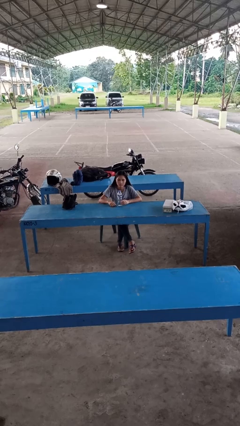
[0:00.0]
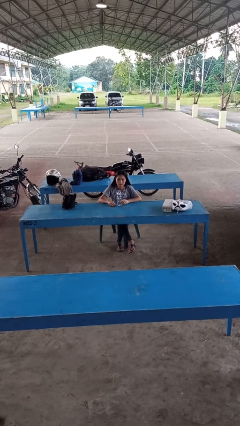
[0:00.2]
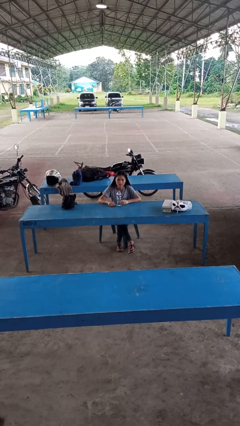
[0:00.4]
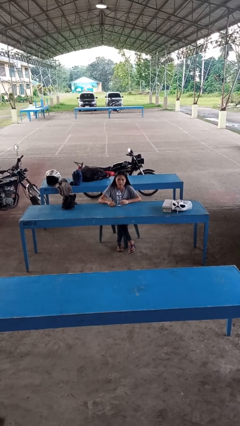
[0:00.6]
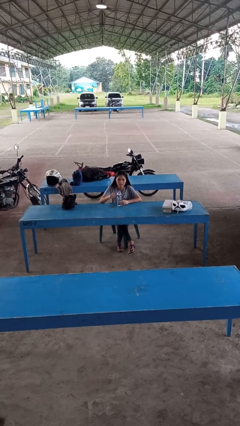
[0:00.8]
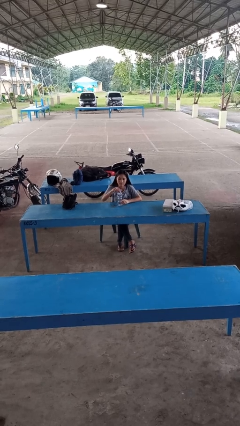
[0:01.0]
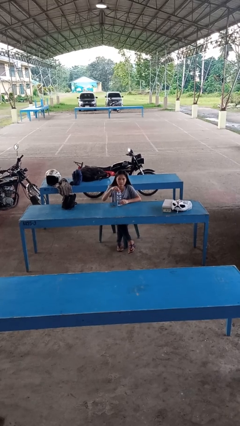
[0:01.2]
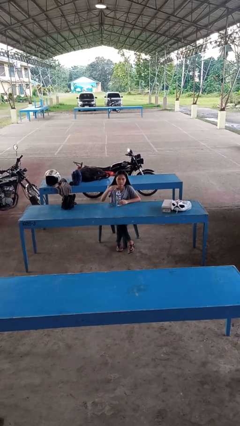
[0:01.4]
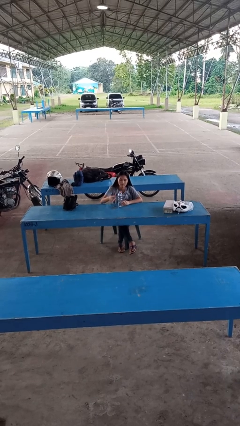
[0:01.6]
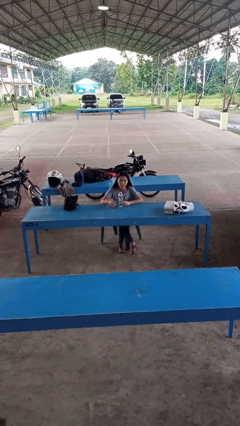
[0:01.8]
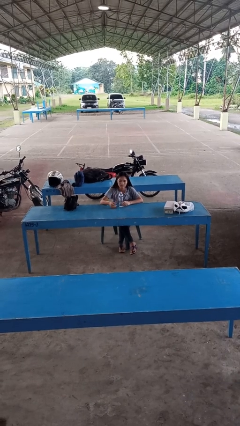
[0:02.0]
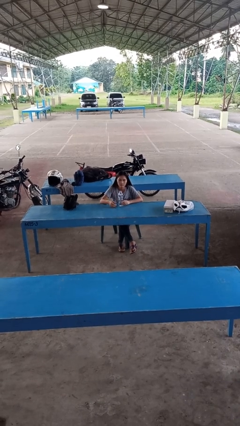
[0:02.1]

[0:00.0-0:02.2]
person unscrews lid from bottle

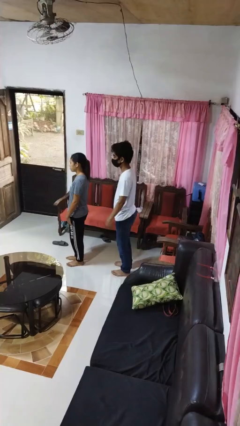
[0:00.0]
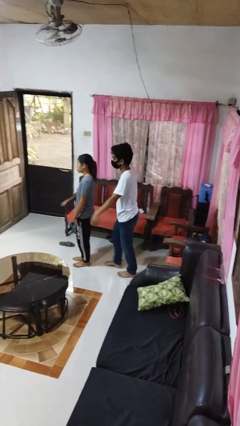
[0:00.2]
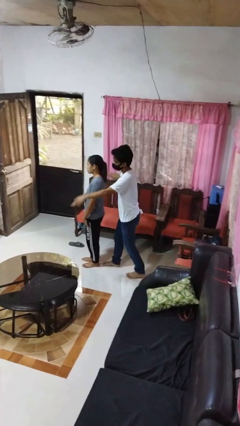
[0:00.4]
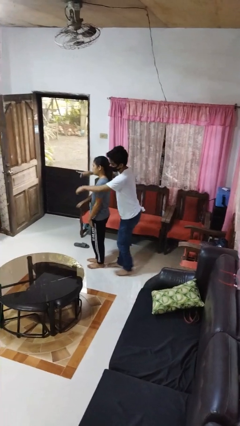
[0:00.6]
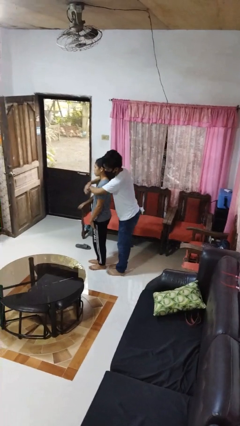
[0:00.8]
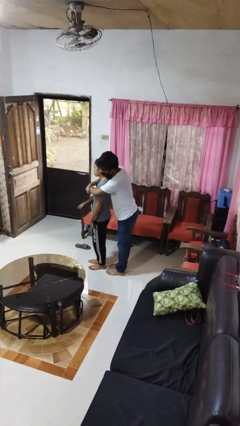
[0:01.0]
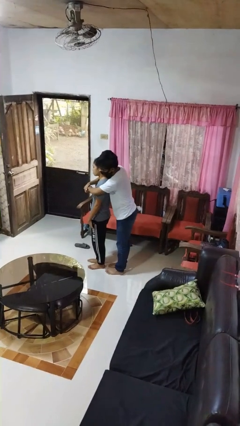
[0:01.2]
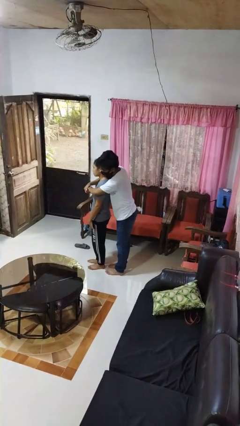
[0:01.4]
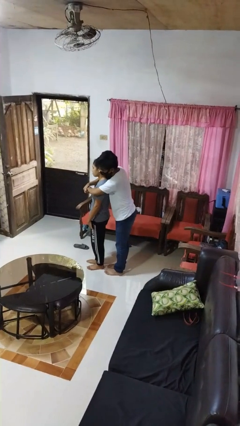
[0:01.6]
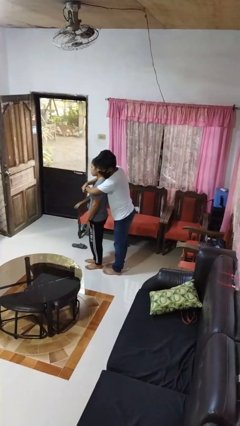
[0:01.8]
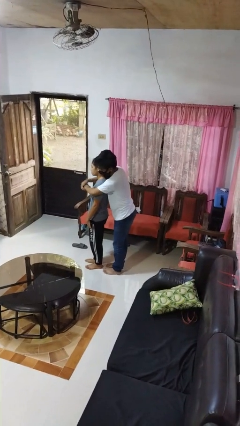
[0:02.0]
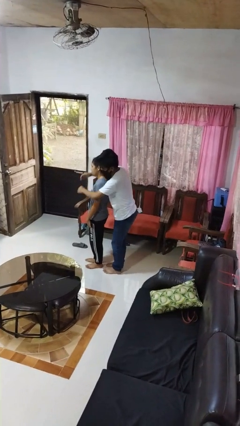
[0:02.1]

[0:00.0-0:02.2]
person hugs person from behind

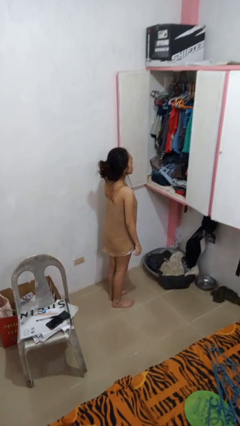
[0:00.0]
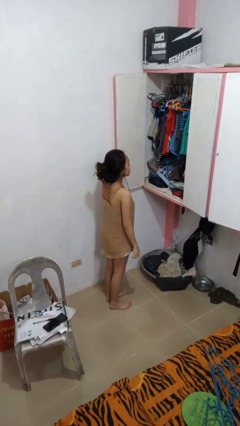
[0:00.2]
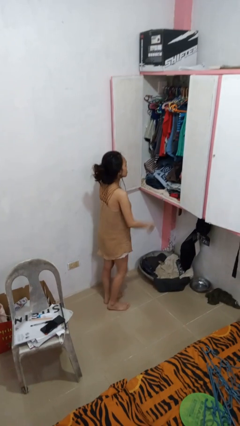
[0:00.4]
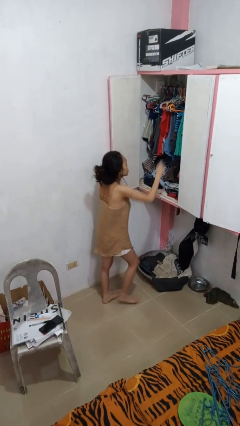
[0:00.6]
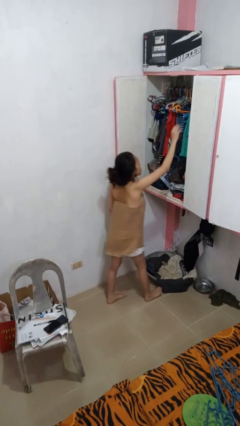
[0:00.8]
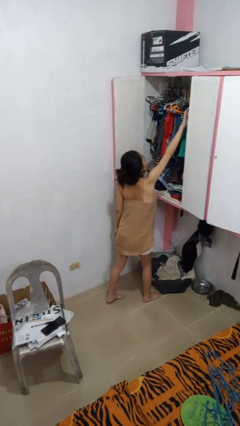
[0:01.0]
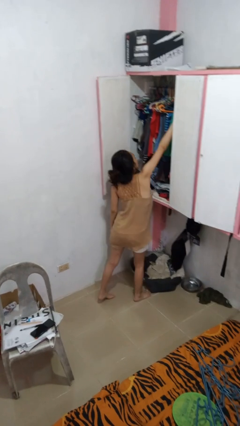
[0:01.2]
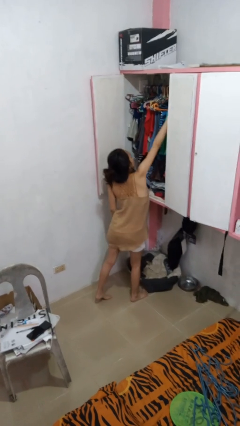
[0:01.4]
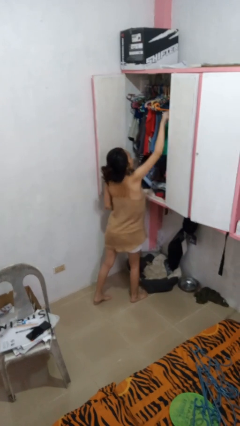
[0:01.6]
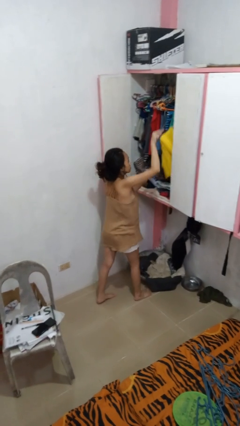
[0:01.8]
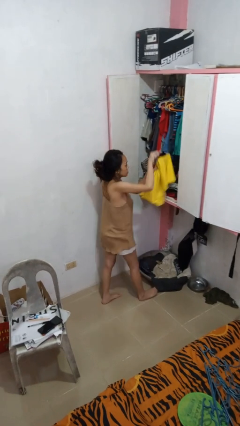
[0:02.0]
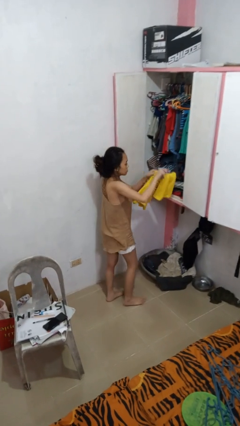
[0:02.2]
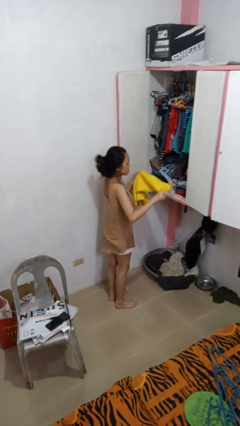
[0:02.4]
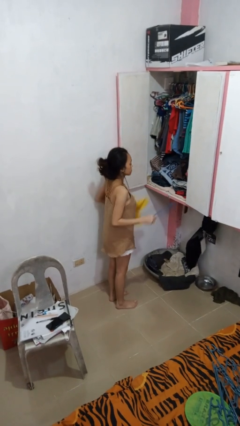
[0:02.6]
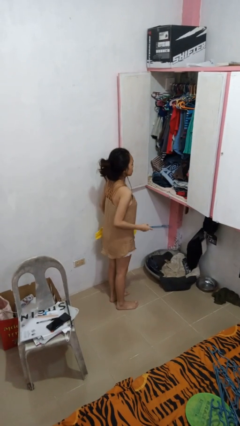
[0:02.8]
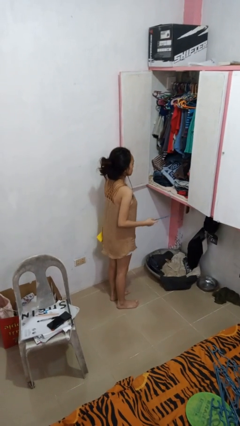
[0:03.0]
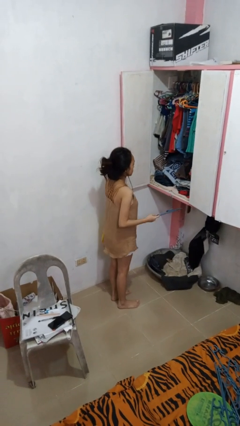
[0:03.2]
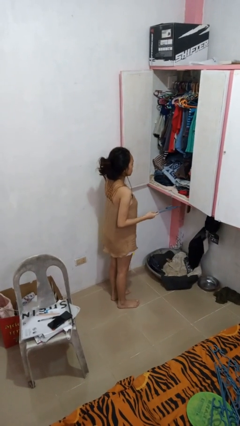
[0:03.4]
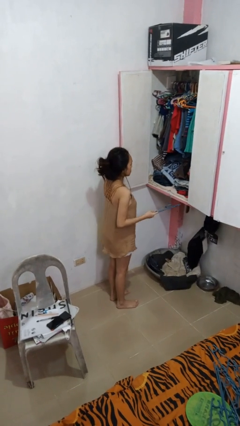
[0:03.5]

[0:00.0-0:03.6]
person takes clothes from closet

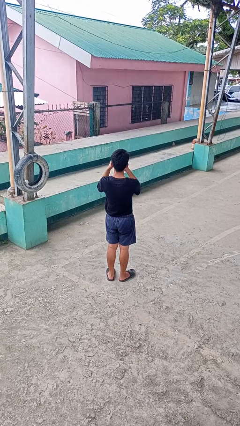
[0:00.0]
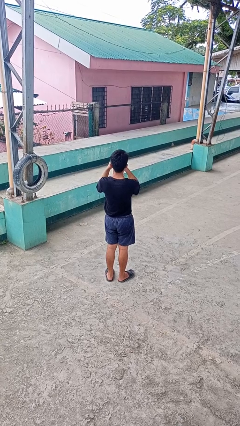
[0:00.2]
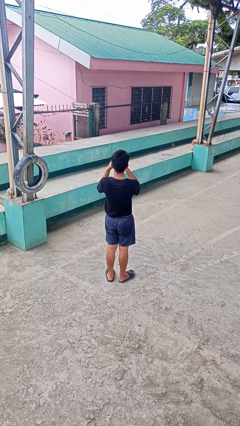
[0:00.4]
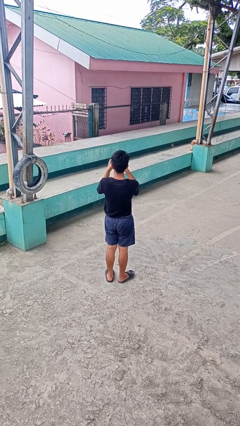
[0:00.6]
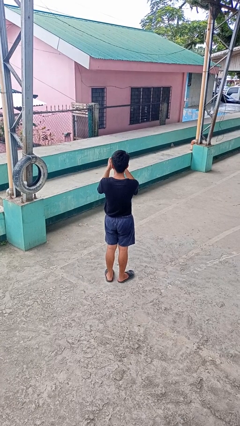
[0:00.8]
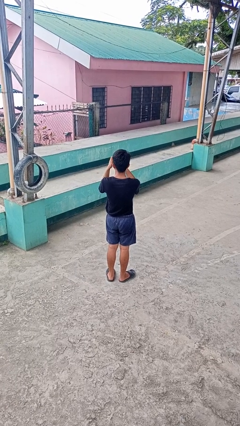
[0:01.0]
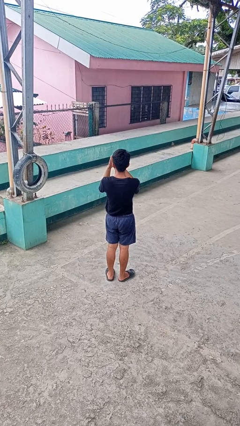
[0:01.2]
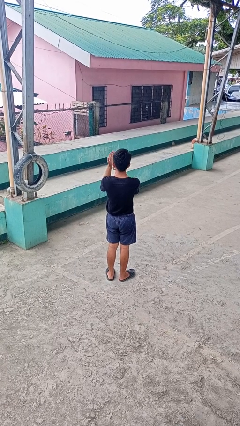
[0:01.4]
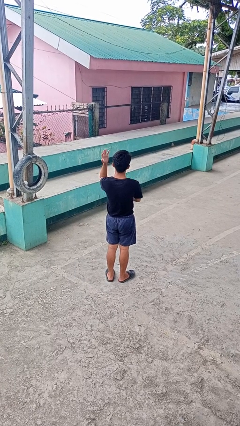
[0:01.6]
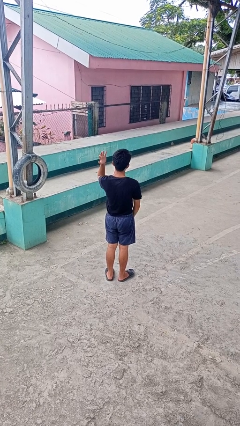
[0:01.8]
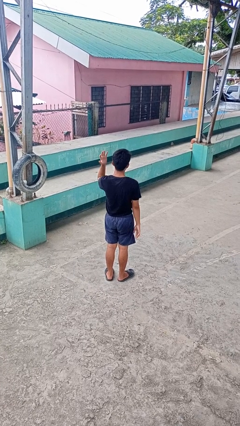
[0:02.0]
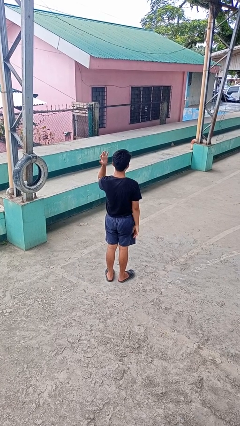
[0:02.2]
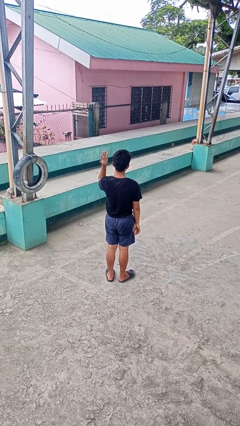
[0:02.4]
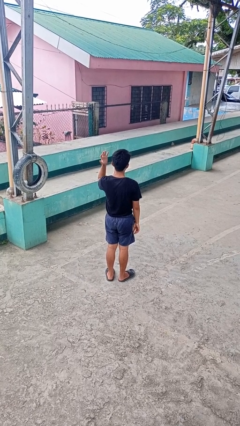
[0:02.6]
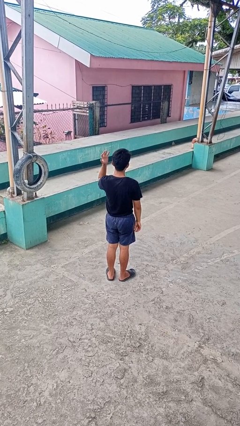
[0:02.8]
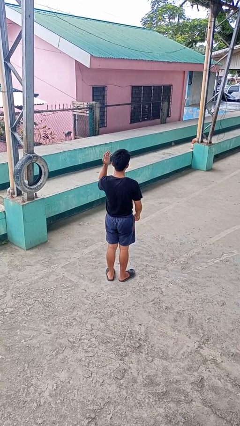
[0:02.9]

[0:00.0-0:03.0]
person puts on ring

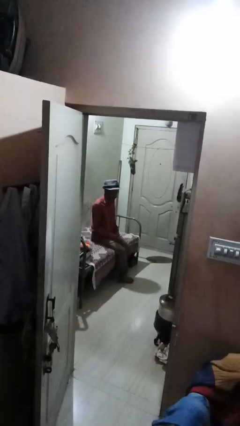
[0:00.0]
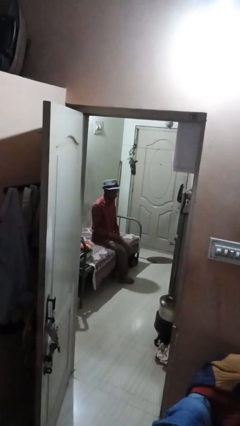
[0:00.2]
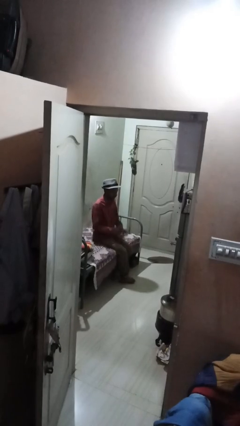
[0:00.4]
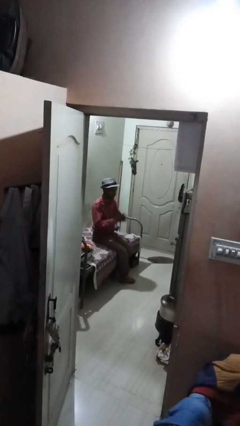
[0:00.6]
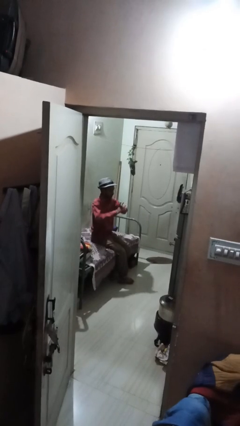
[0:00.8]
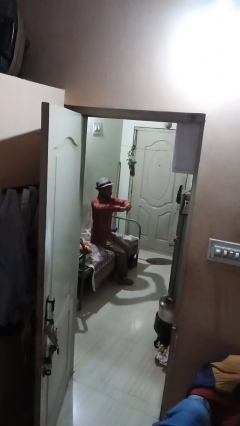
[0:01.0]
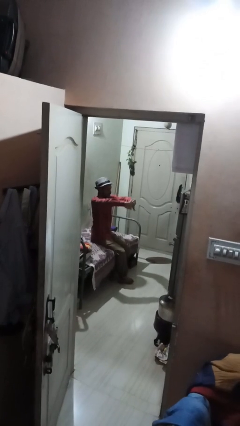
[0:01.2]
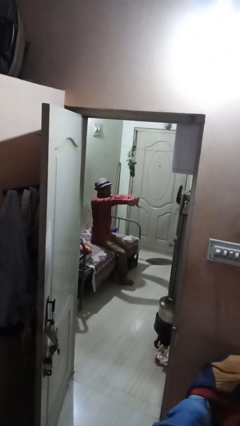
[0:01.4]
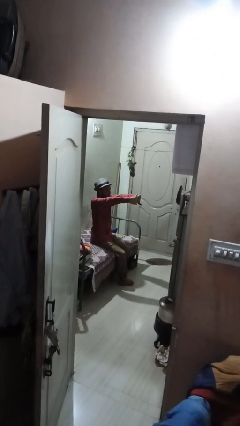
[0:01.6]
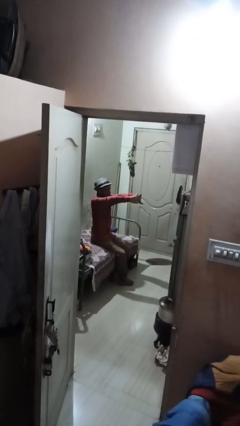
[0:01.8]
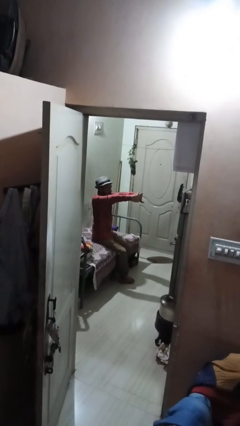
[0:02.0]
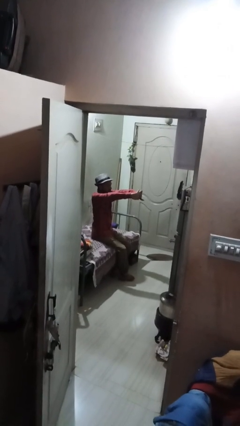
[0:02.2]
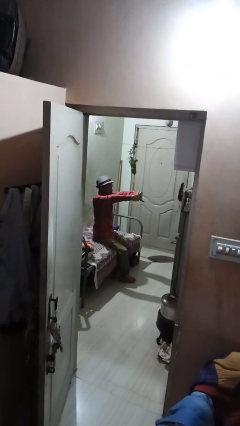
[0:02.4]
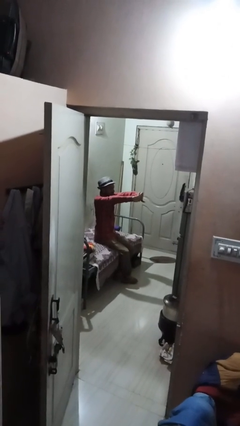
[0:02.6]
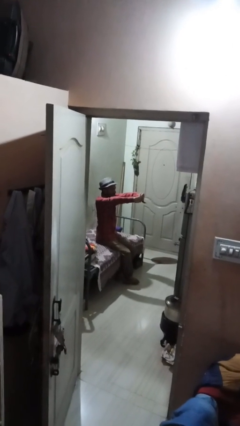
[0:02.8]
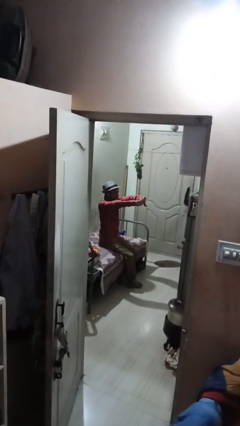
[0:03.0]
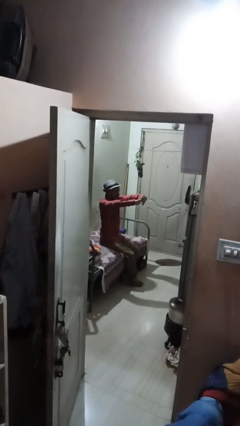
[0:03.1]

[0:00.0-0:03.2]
person cracks knuckles

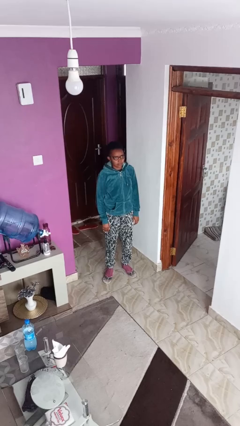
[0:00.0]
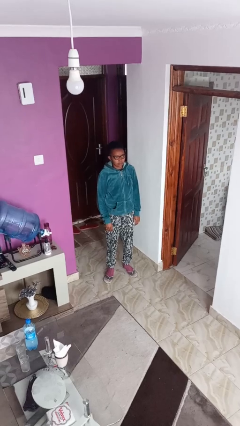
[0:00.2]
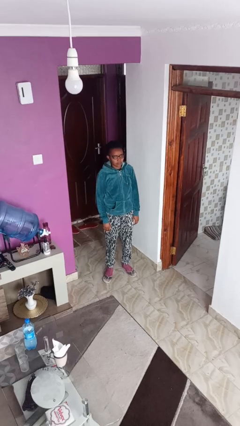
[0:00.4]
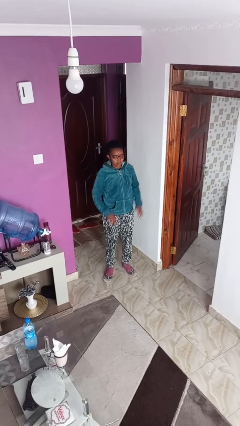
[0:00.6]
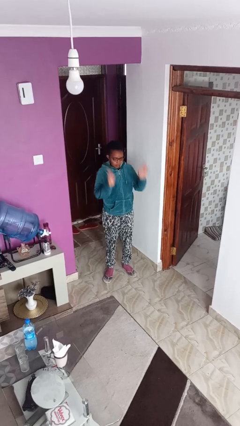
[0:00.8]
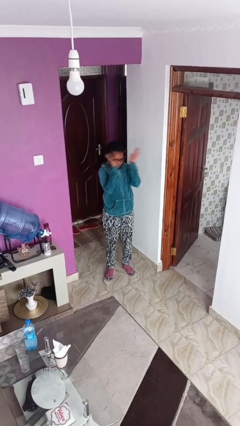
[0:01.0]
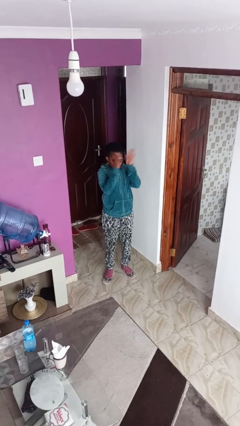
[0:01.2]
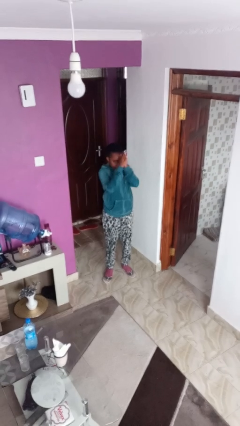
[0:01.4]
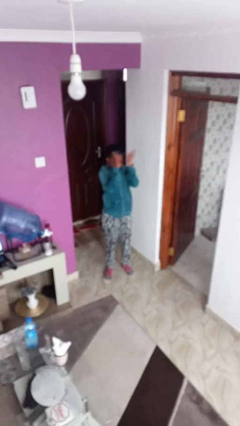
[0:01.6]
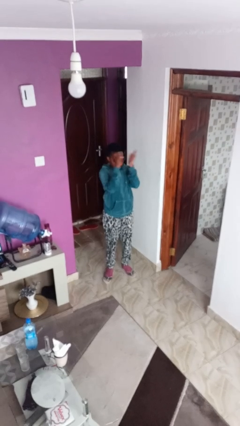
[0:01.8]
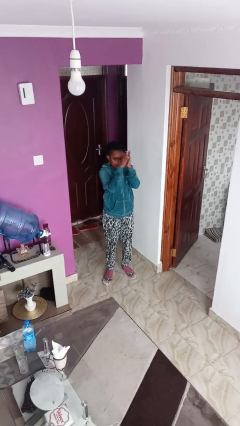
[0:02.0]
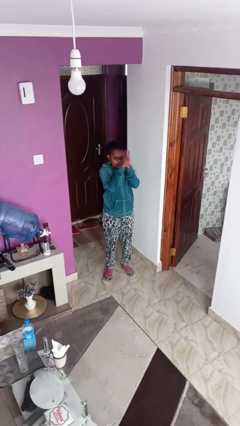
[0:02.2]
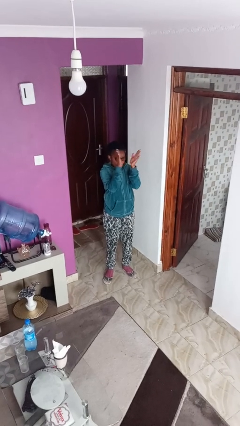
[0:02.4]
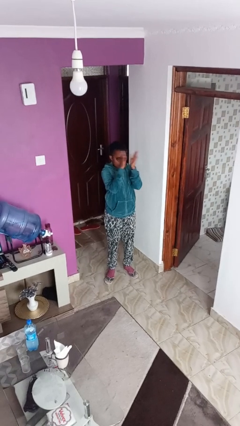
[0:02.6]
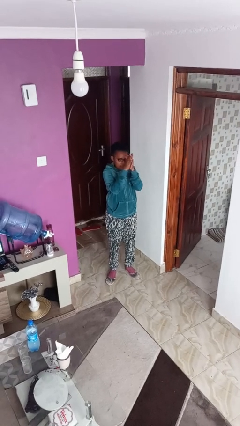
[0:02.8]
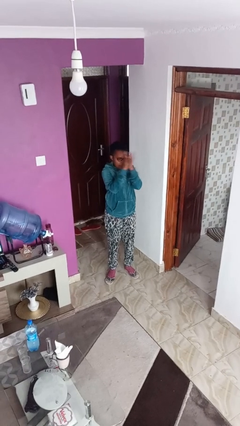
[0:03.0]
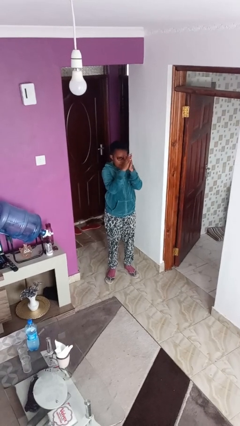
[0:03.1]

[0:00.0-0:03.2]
person claps hands

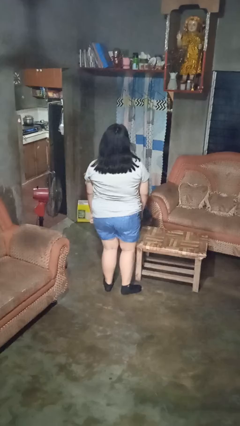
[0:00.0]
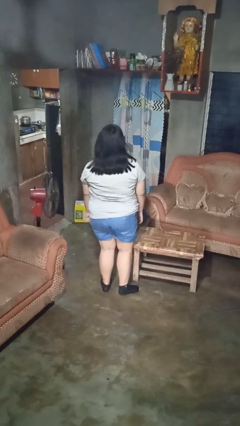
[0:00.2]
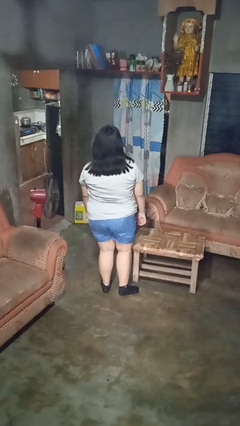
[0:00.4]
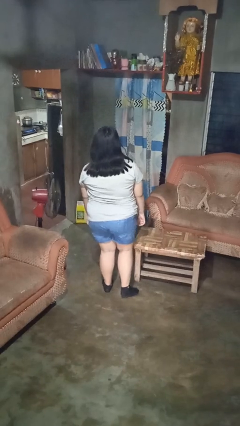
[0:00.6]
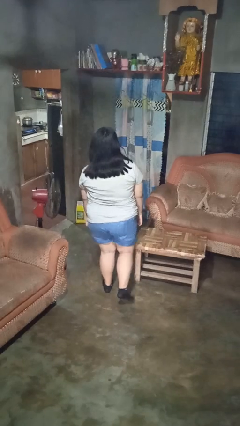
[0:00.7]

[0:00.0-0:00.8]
person bumps into table
